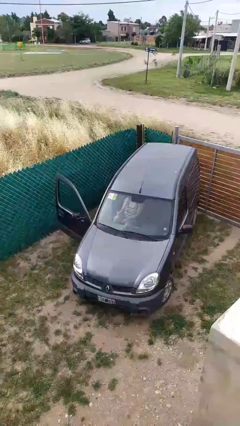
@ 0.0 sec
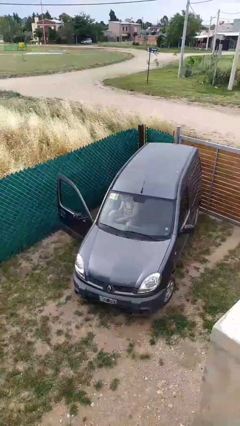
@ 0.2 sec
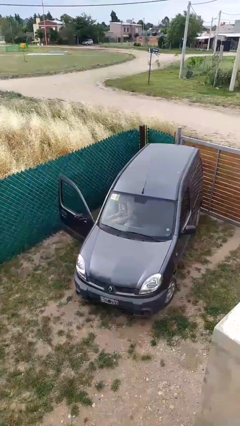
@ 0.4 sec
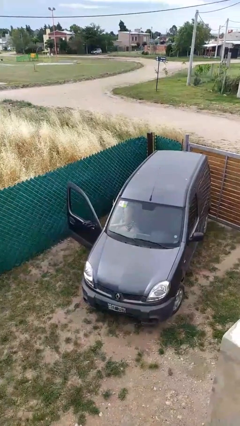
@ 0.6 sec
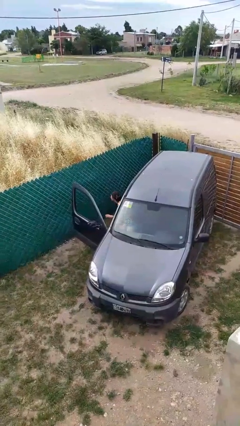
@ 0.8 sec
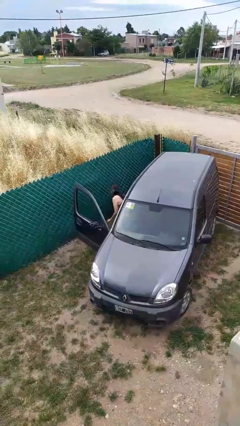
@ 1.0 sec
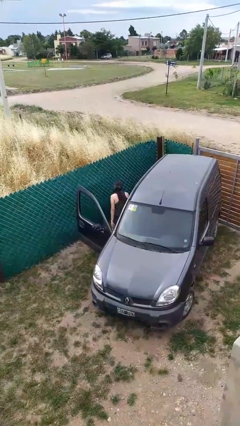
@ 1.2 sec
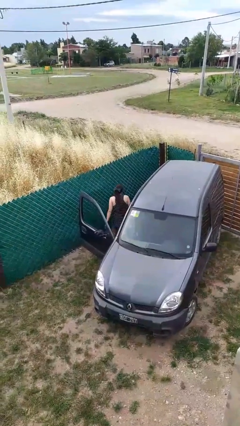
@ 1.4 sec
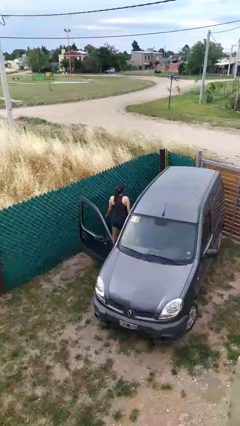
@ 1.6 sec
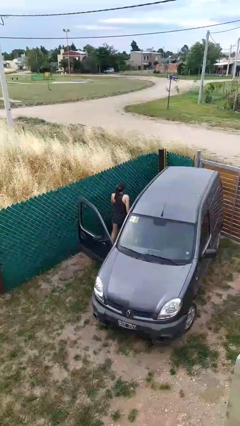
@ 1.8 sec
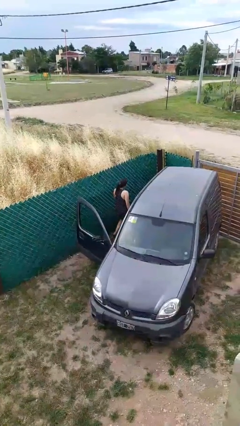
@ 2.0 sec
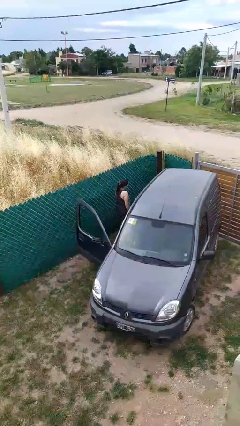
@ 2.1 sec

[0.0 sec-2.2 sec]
person exits car

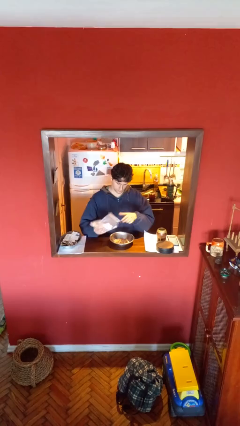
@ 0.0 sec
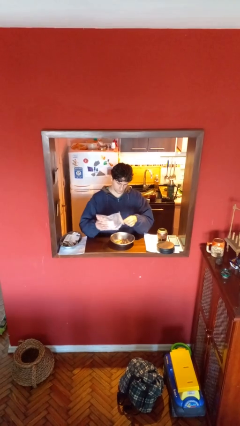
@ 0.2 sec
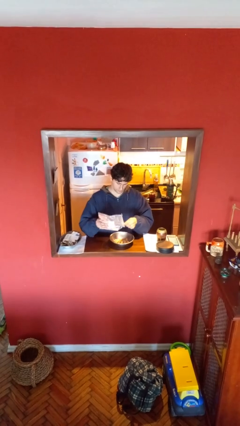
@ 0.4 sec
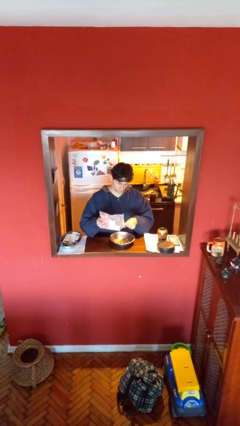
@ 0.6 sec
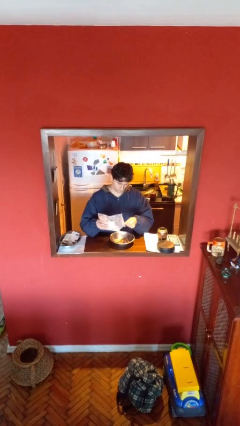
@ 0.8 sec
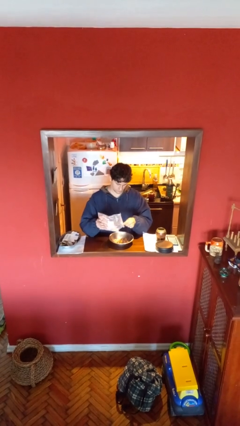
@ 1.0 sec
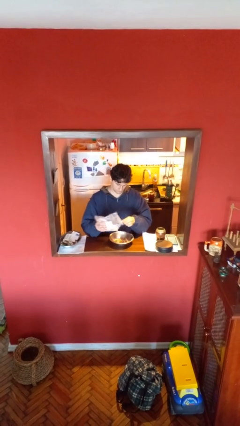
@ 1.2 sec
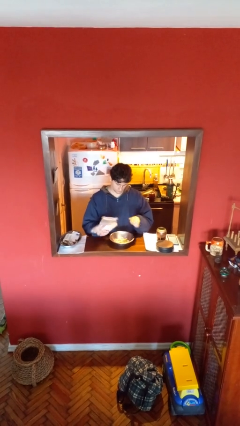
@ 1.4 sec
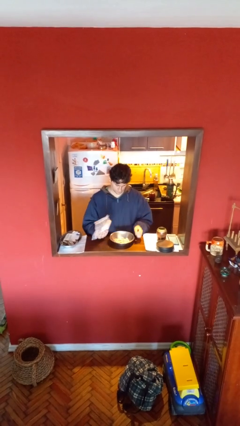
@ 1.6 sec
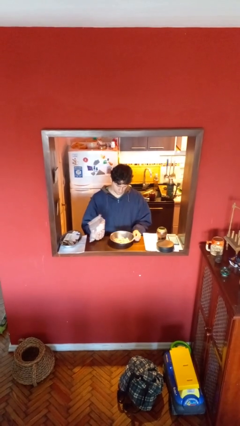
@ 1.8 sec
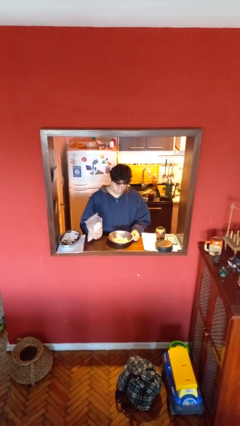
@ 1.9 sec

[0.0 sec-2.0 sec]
person pours into bowl

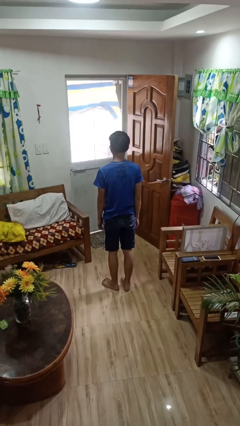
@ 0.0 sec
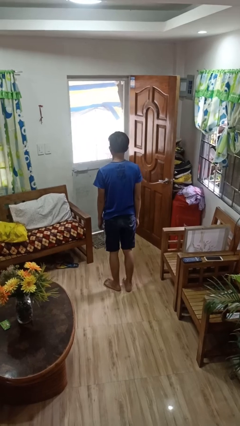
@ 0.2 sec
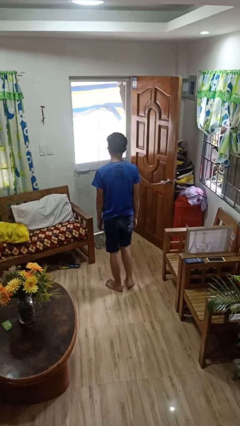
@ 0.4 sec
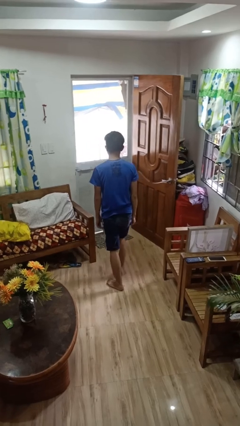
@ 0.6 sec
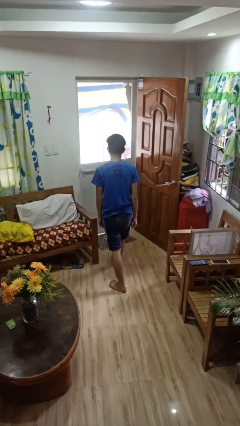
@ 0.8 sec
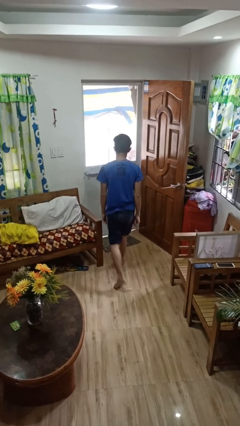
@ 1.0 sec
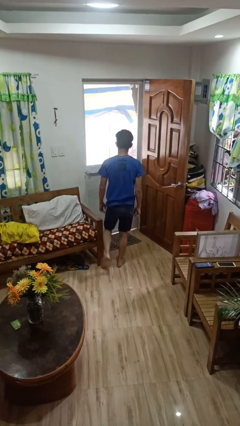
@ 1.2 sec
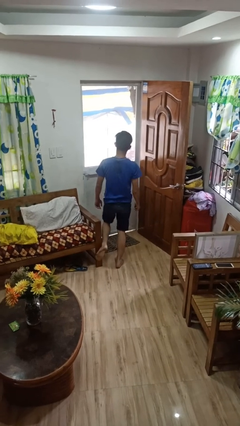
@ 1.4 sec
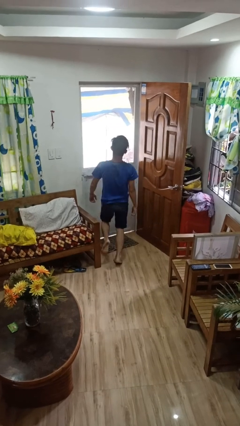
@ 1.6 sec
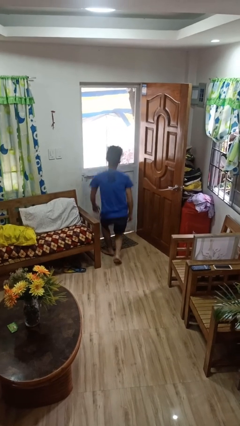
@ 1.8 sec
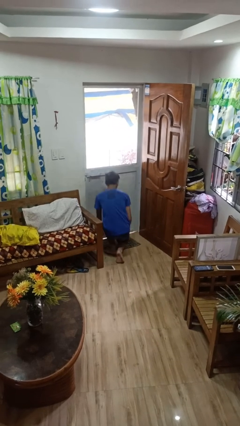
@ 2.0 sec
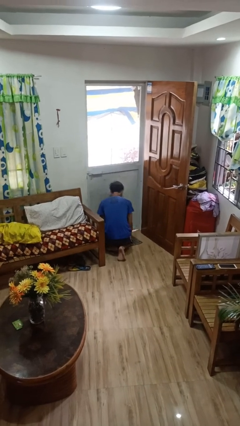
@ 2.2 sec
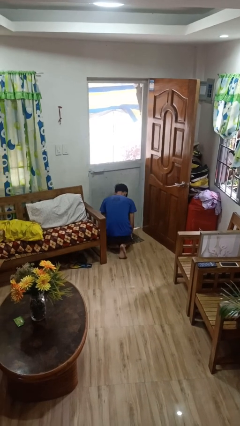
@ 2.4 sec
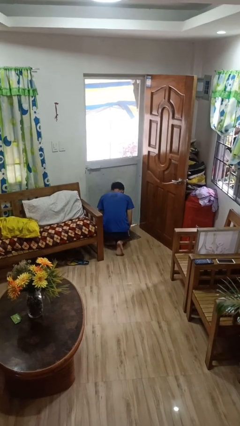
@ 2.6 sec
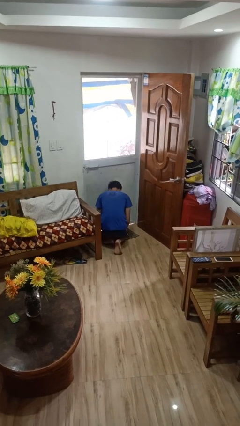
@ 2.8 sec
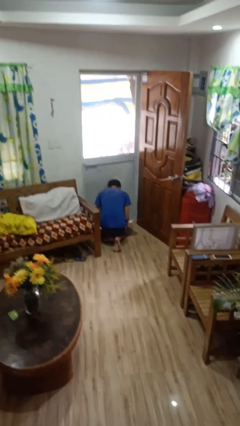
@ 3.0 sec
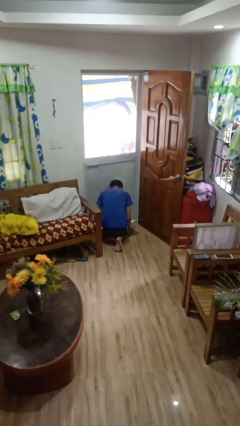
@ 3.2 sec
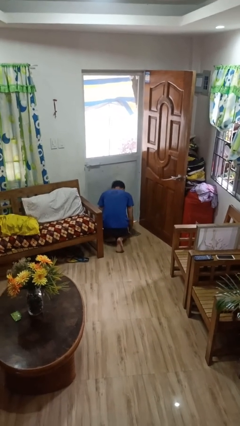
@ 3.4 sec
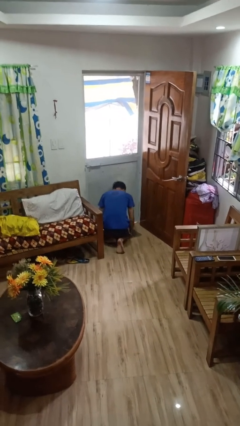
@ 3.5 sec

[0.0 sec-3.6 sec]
person trips on object on floor

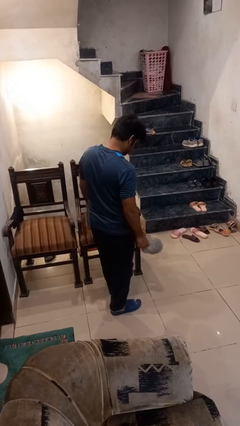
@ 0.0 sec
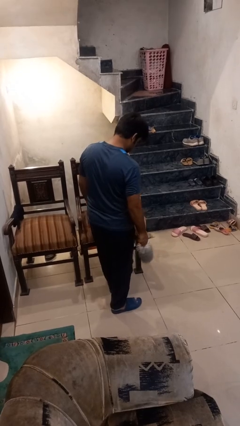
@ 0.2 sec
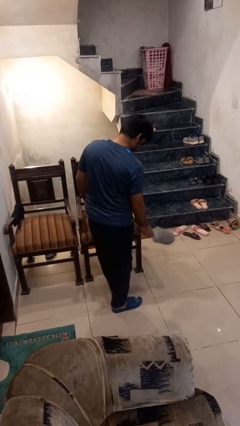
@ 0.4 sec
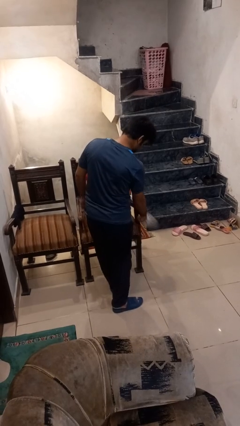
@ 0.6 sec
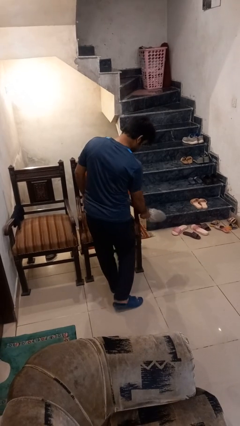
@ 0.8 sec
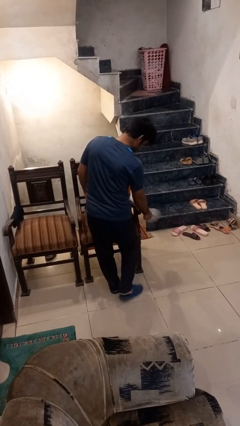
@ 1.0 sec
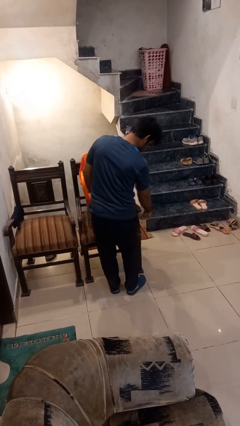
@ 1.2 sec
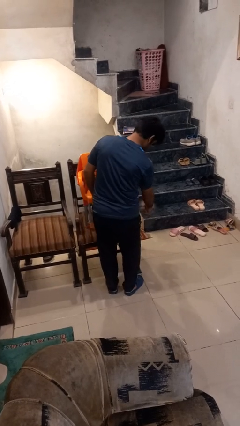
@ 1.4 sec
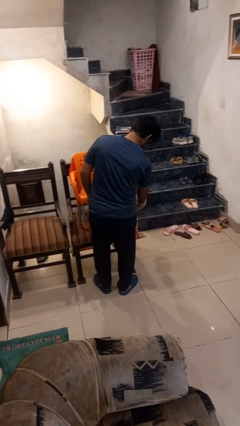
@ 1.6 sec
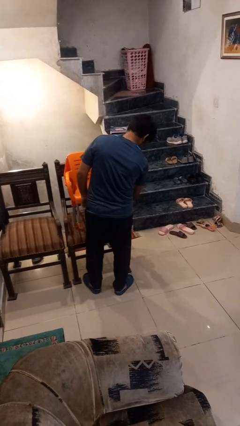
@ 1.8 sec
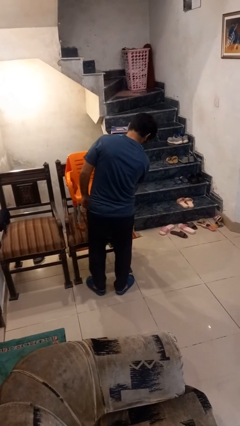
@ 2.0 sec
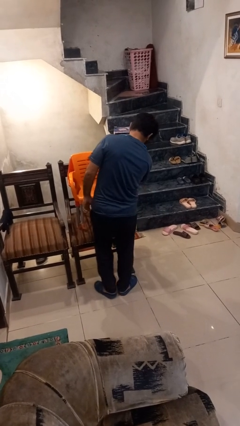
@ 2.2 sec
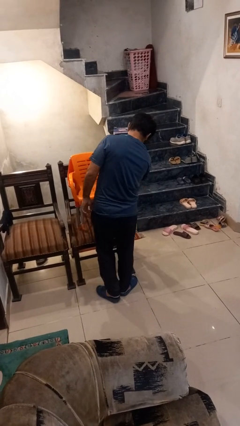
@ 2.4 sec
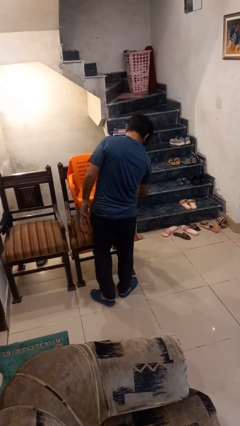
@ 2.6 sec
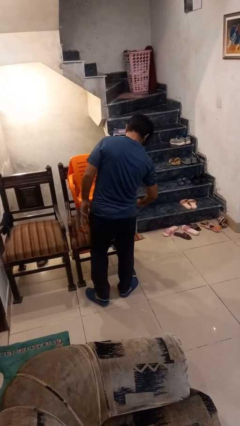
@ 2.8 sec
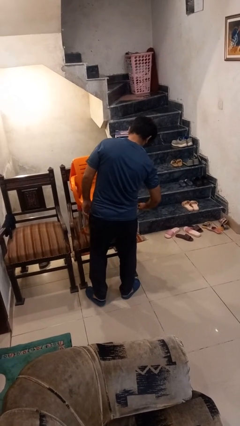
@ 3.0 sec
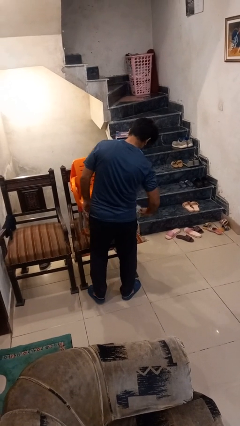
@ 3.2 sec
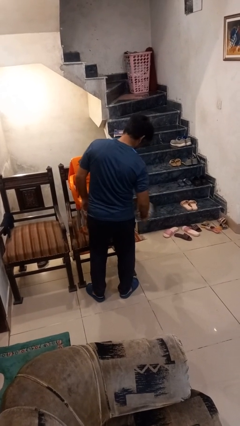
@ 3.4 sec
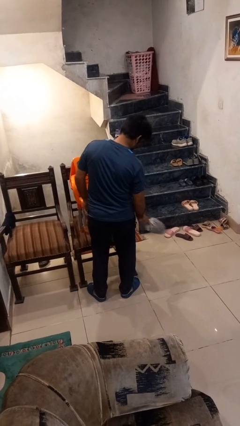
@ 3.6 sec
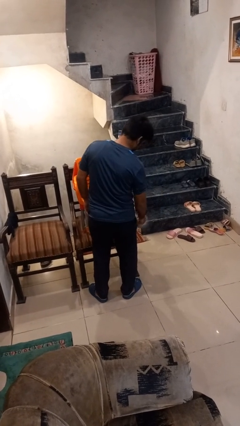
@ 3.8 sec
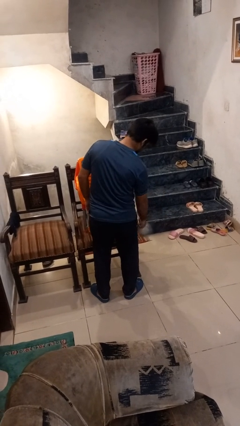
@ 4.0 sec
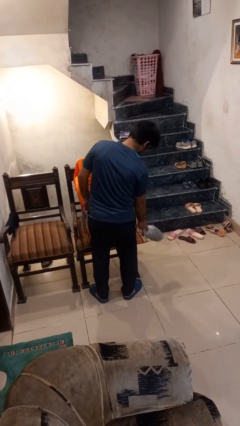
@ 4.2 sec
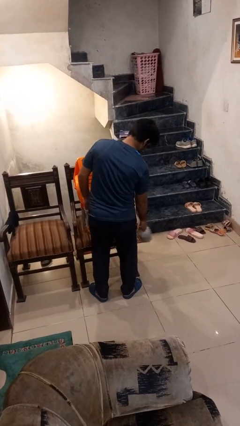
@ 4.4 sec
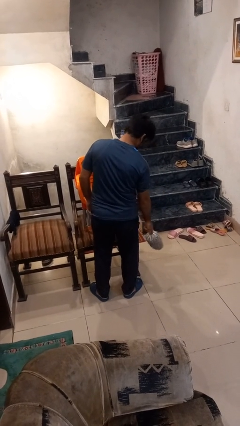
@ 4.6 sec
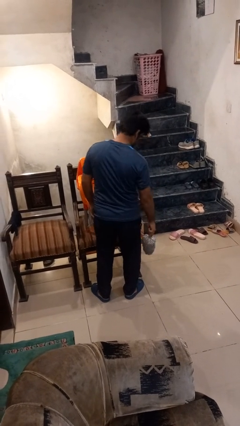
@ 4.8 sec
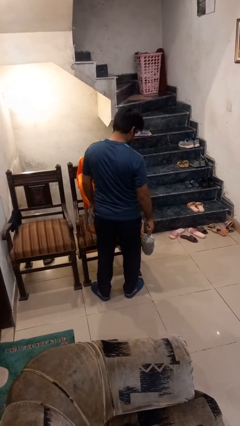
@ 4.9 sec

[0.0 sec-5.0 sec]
person dusts furniture

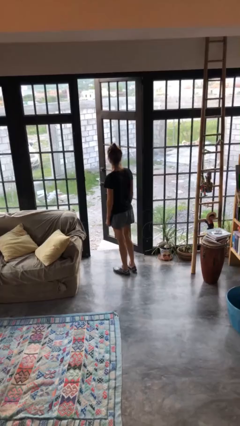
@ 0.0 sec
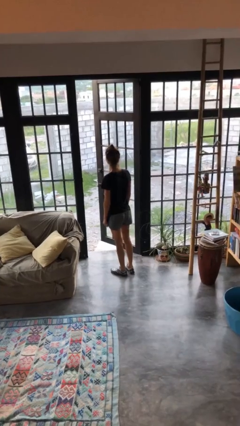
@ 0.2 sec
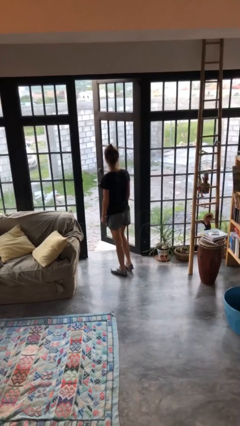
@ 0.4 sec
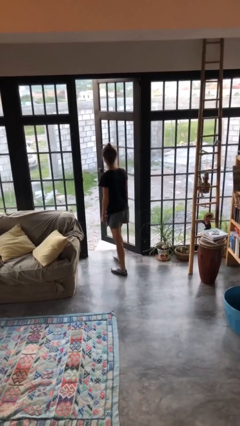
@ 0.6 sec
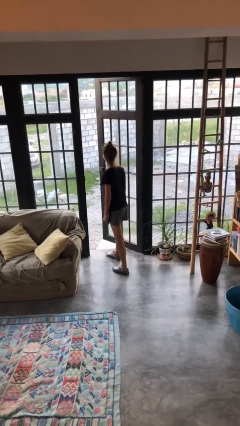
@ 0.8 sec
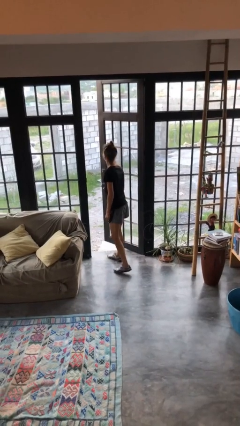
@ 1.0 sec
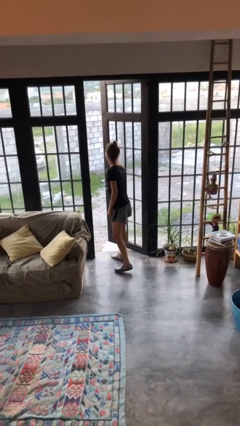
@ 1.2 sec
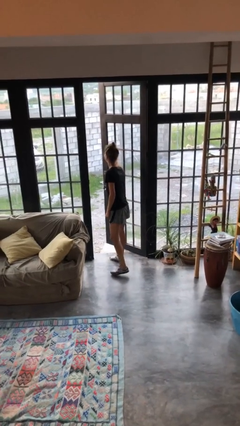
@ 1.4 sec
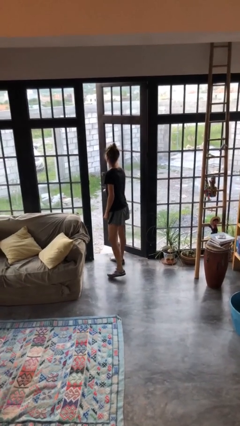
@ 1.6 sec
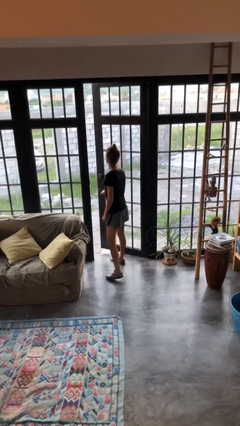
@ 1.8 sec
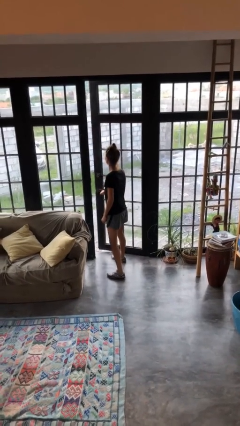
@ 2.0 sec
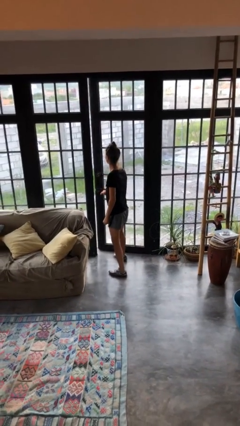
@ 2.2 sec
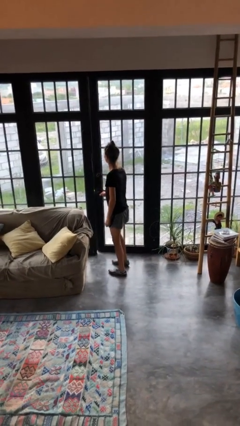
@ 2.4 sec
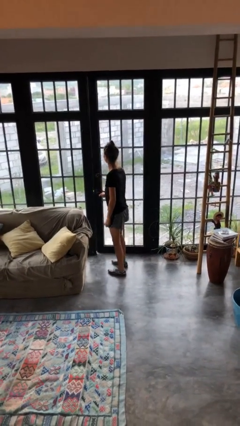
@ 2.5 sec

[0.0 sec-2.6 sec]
person closes facility door

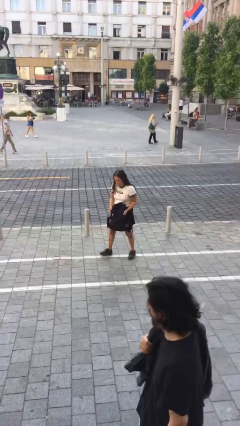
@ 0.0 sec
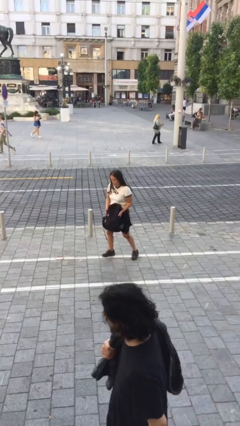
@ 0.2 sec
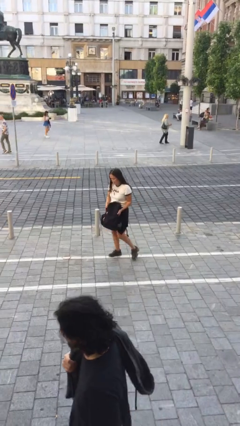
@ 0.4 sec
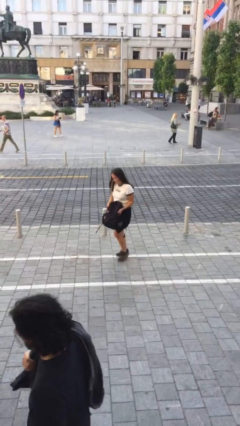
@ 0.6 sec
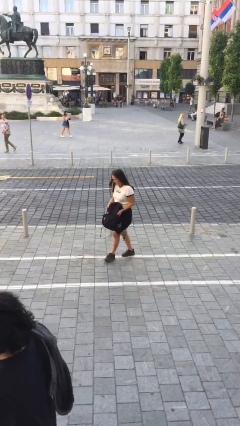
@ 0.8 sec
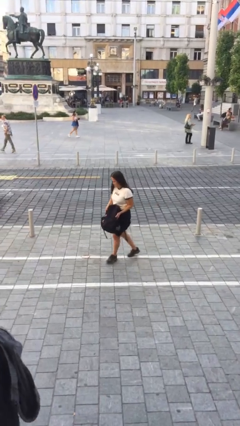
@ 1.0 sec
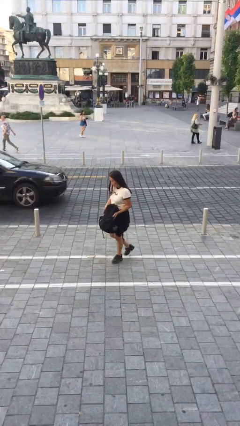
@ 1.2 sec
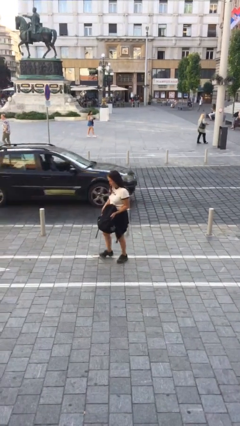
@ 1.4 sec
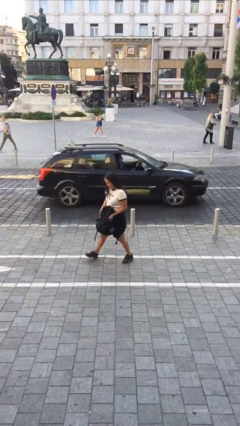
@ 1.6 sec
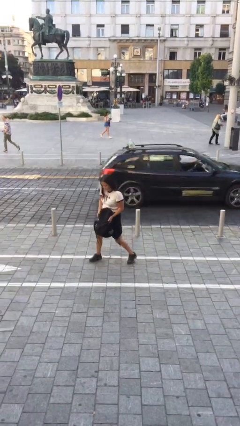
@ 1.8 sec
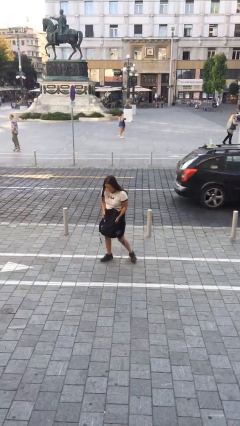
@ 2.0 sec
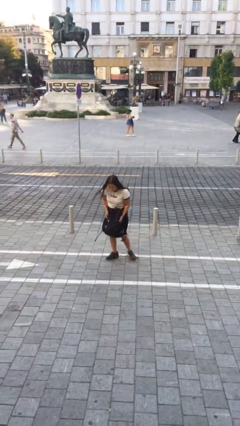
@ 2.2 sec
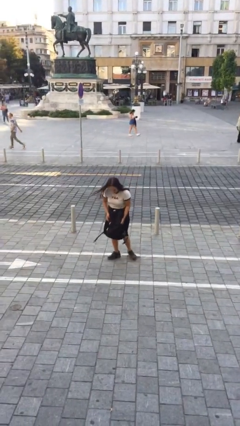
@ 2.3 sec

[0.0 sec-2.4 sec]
person carries heavy object
